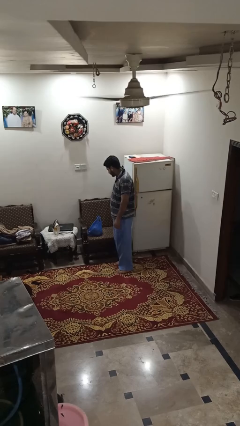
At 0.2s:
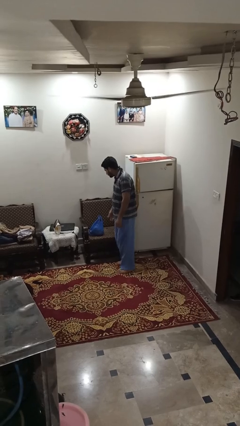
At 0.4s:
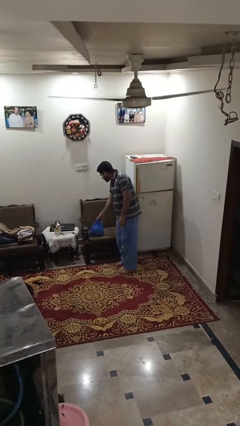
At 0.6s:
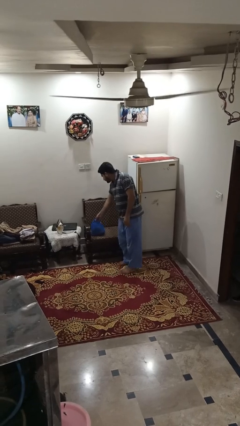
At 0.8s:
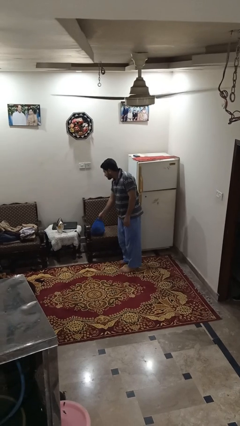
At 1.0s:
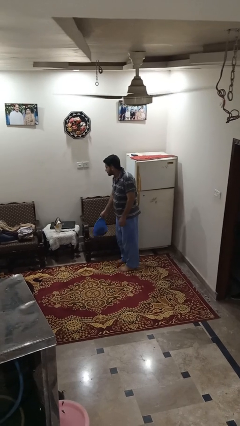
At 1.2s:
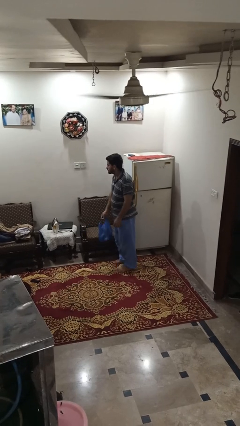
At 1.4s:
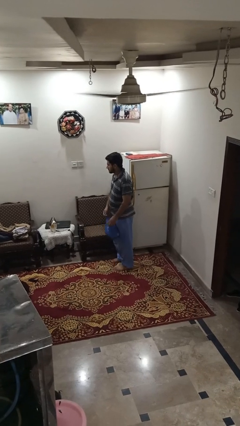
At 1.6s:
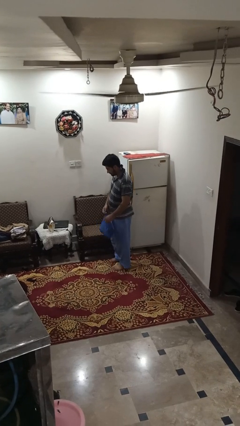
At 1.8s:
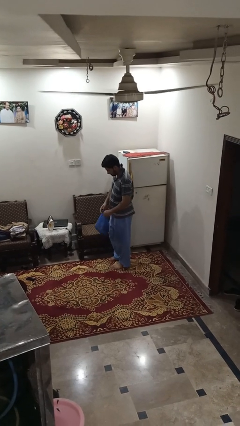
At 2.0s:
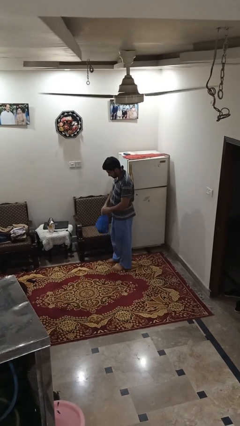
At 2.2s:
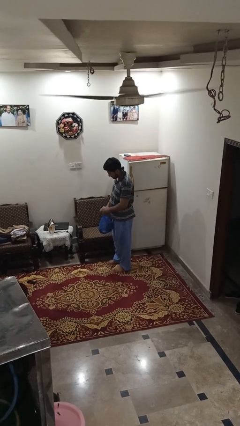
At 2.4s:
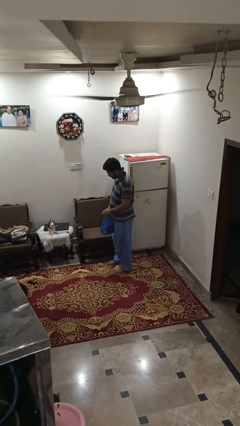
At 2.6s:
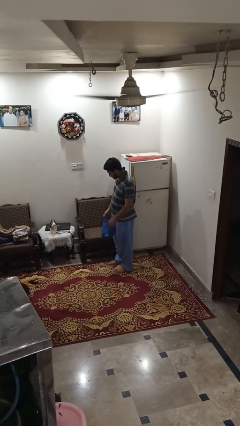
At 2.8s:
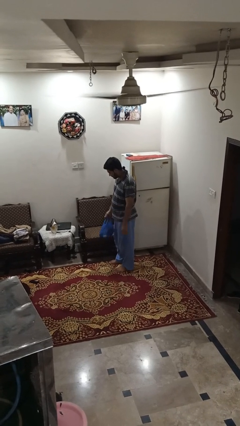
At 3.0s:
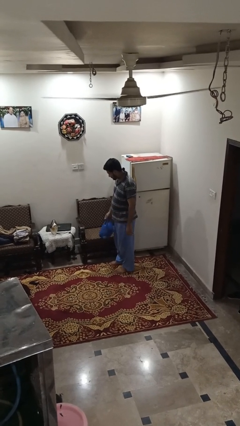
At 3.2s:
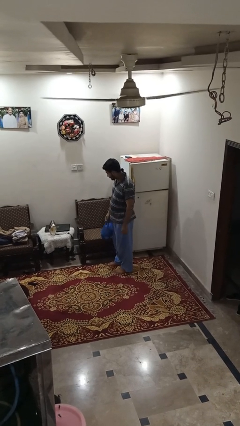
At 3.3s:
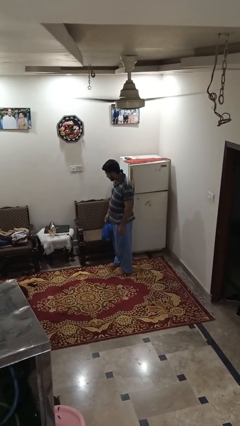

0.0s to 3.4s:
person picks up object from couch

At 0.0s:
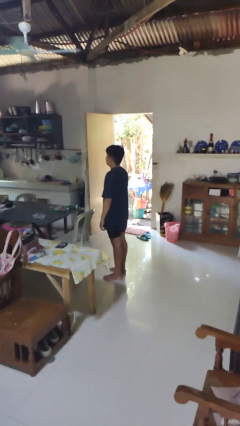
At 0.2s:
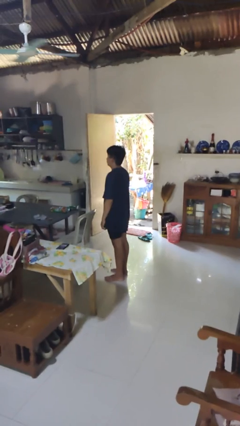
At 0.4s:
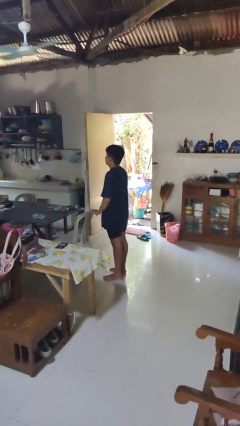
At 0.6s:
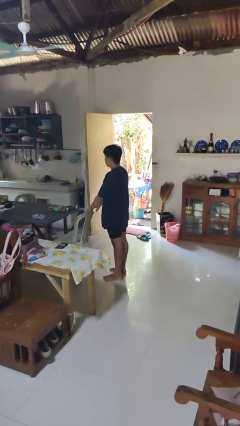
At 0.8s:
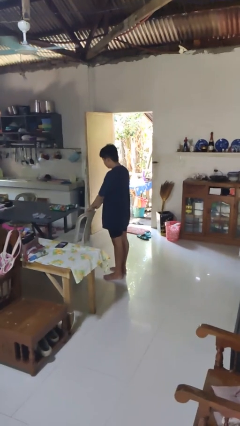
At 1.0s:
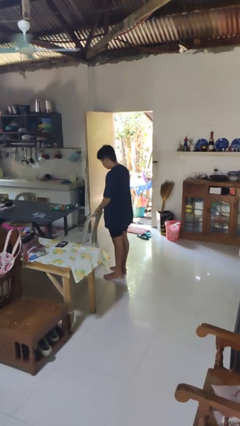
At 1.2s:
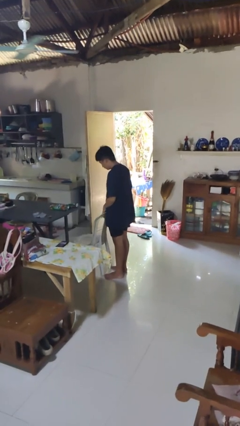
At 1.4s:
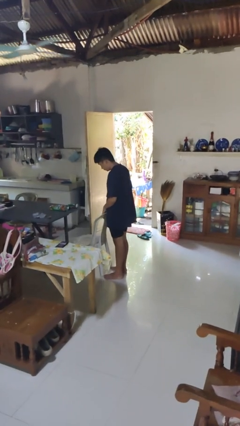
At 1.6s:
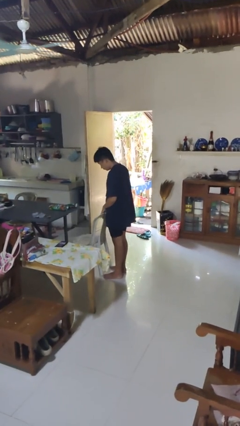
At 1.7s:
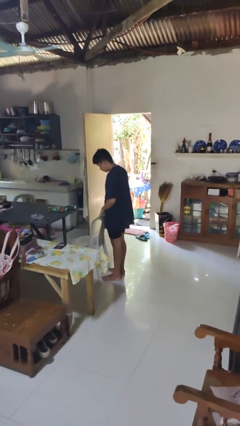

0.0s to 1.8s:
person pulls out chair

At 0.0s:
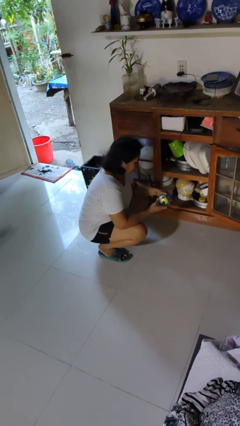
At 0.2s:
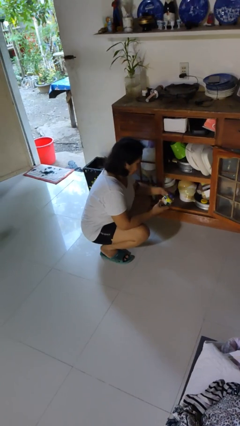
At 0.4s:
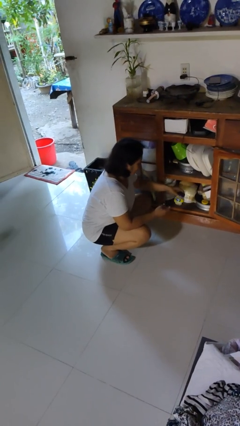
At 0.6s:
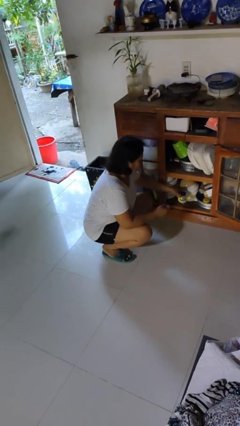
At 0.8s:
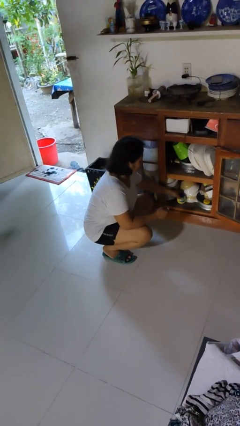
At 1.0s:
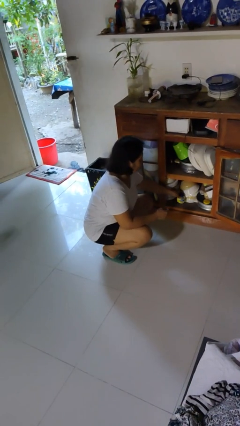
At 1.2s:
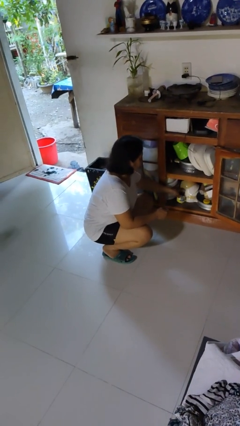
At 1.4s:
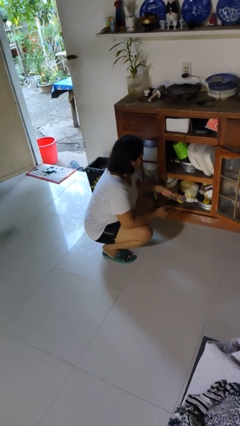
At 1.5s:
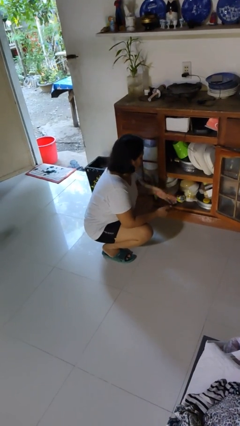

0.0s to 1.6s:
person puts down object into cabinet

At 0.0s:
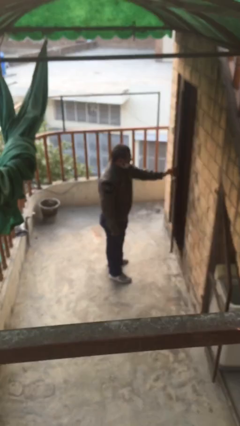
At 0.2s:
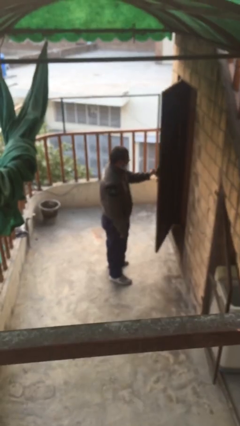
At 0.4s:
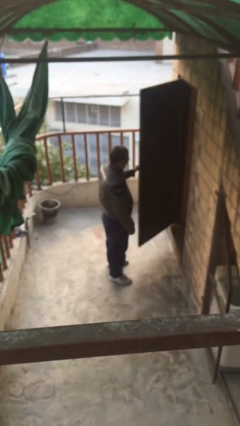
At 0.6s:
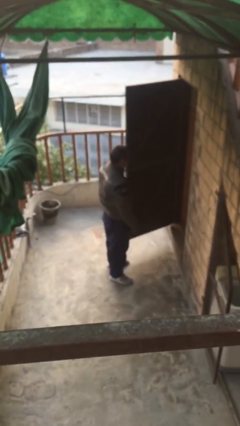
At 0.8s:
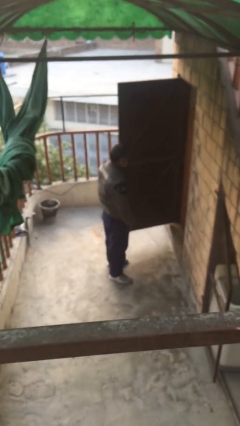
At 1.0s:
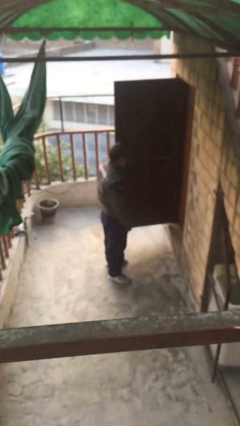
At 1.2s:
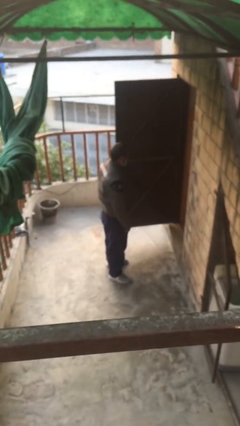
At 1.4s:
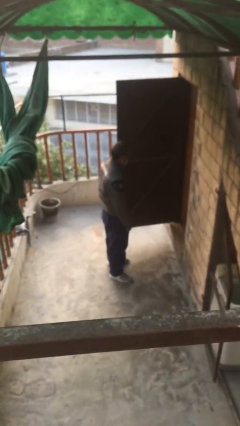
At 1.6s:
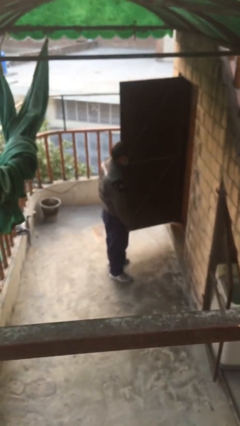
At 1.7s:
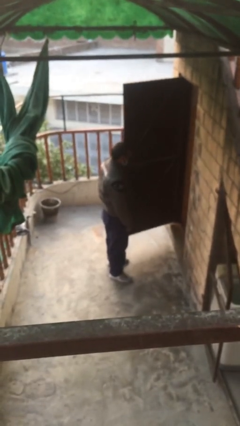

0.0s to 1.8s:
person opens facility door

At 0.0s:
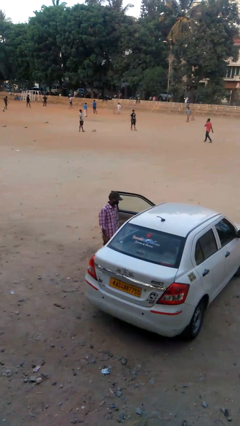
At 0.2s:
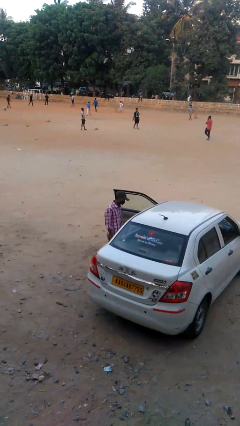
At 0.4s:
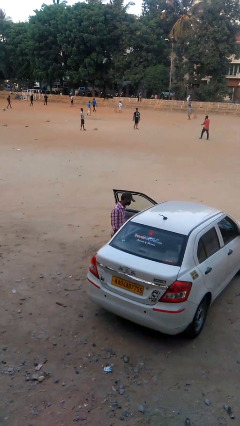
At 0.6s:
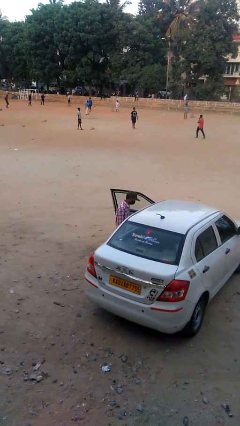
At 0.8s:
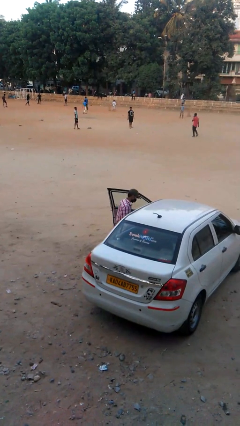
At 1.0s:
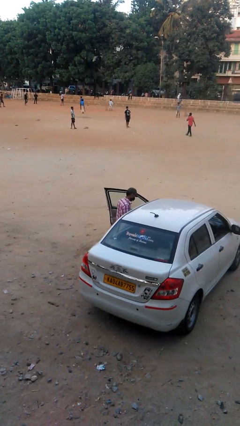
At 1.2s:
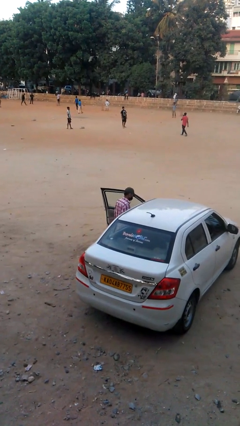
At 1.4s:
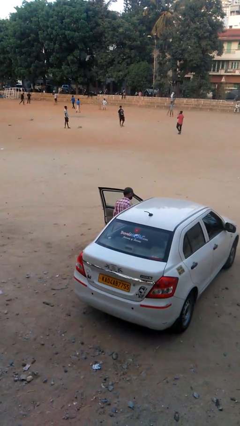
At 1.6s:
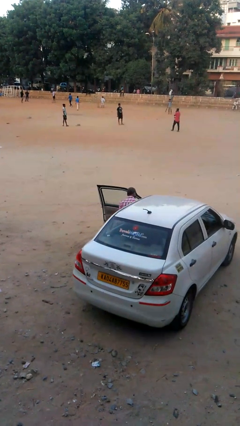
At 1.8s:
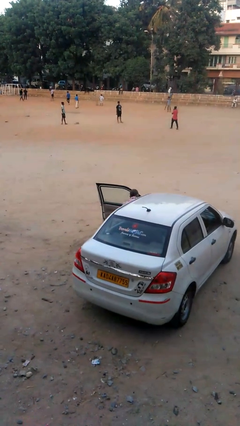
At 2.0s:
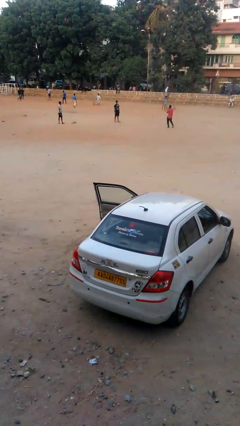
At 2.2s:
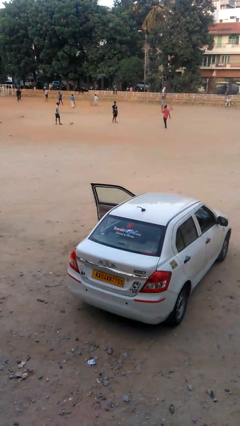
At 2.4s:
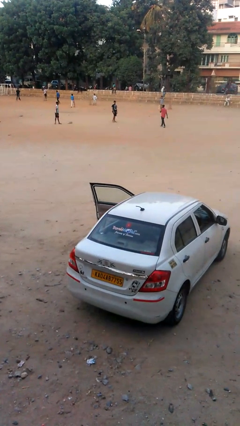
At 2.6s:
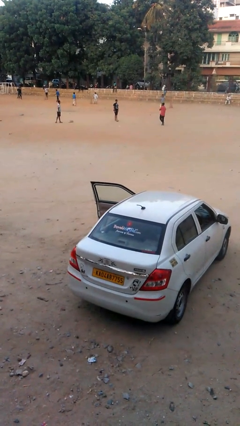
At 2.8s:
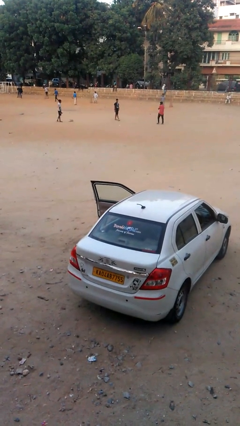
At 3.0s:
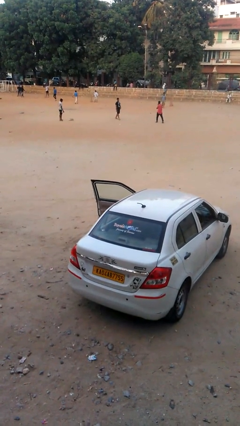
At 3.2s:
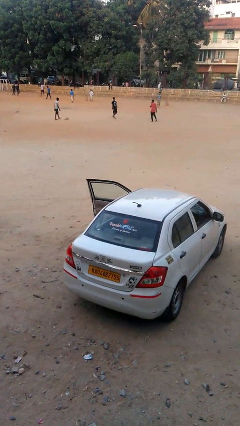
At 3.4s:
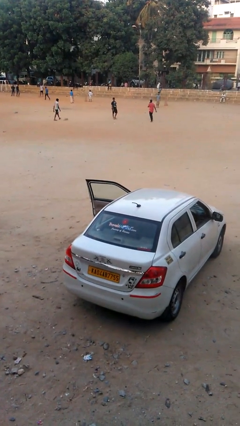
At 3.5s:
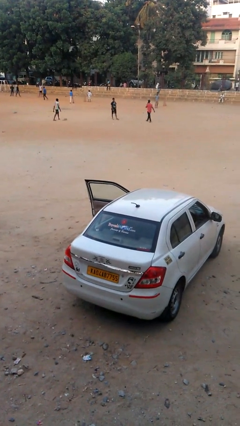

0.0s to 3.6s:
person enters car

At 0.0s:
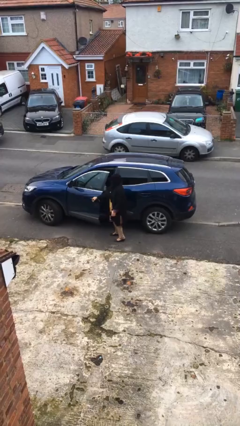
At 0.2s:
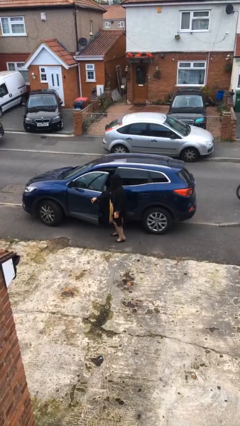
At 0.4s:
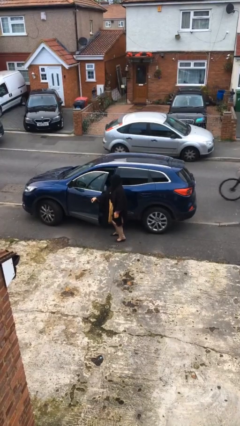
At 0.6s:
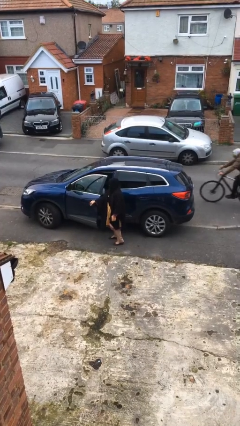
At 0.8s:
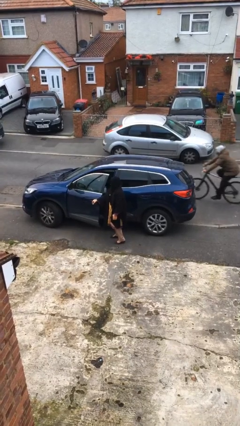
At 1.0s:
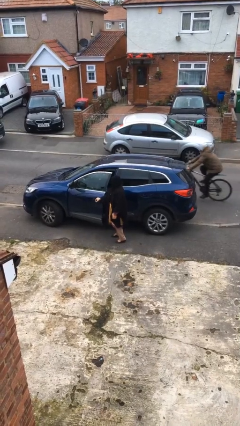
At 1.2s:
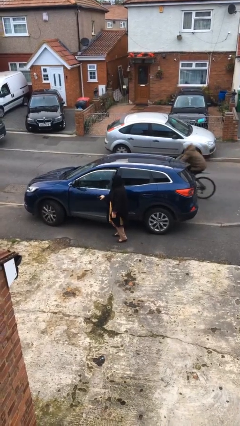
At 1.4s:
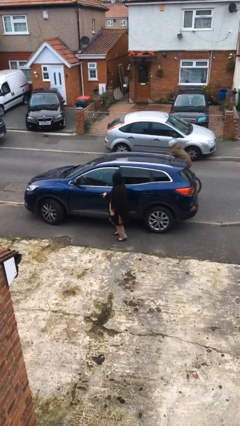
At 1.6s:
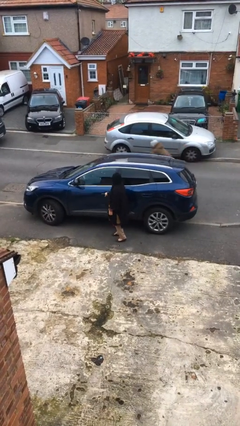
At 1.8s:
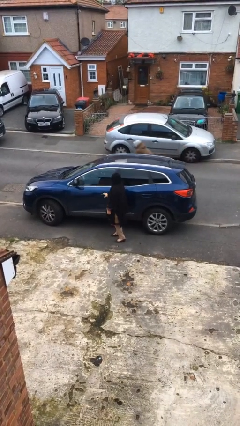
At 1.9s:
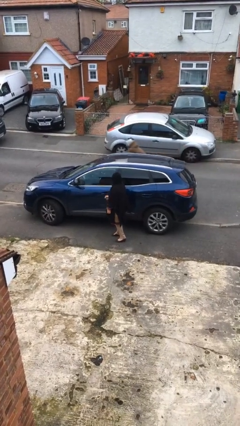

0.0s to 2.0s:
person closes car door

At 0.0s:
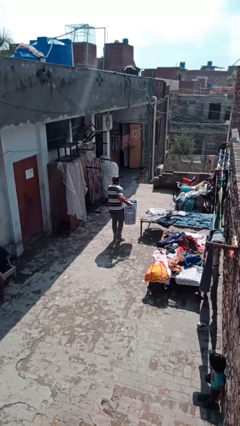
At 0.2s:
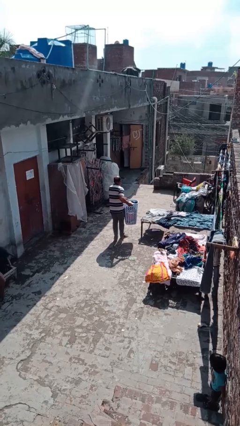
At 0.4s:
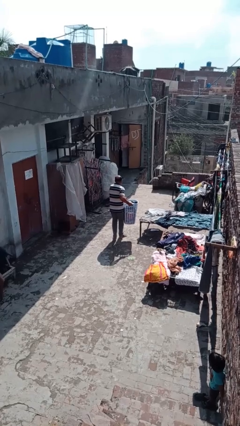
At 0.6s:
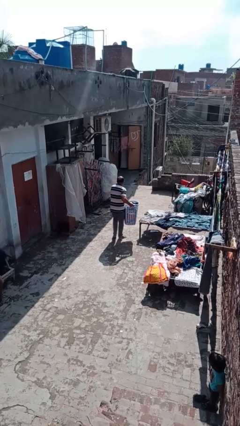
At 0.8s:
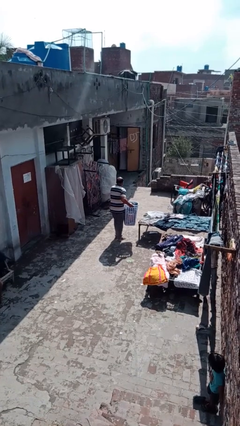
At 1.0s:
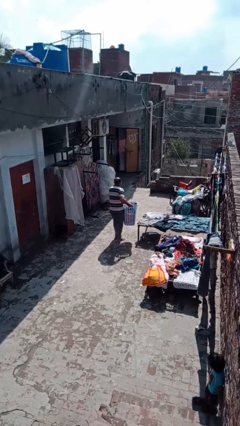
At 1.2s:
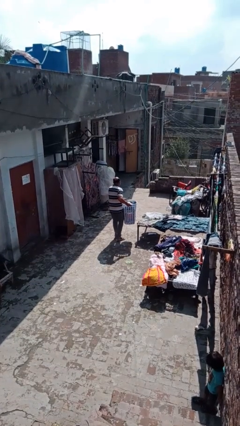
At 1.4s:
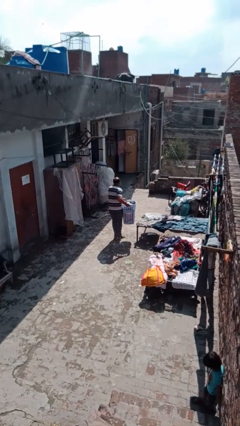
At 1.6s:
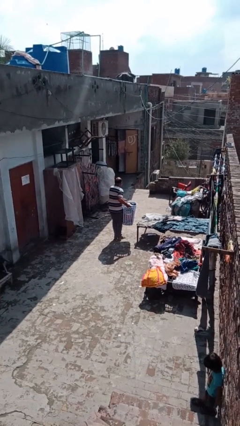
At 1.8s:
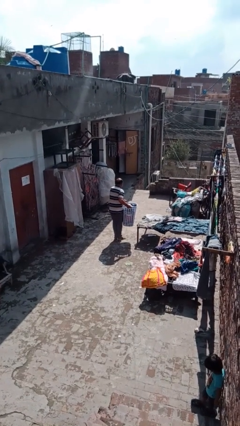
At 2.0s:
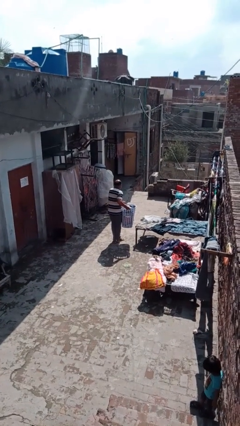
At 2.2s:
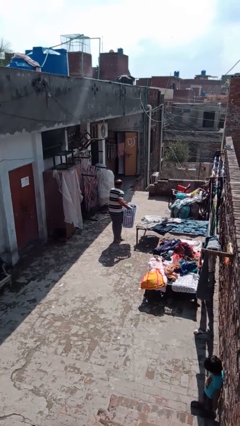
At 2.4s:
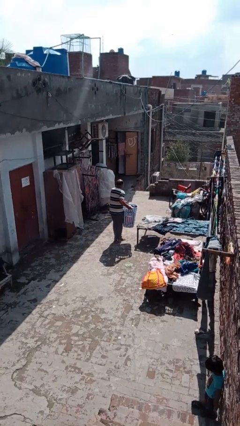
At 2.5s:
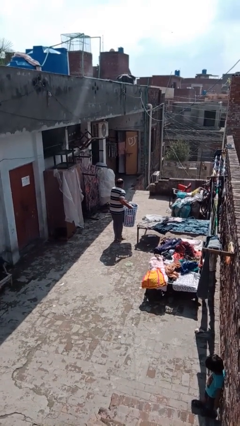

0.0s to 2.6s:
person carries laundry basket
